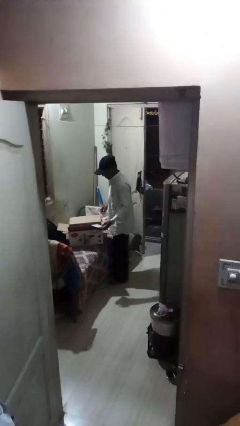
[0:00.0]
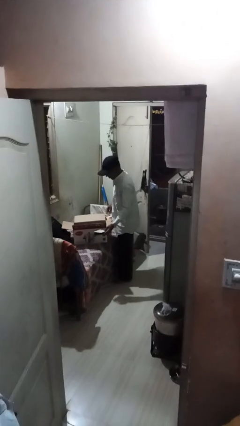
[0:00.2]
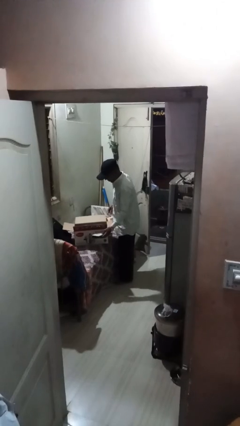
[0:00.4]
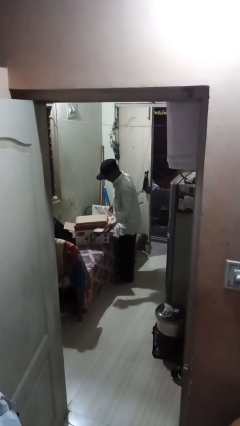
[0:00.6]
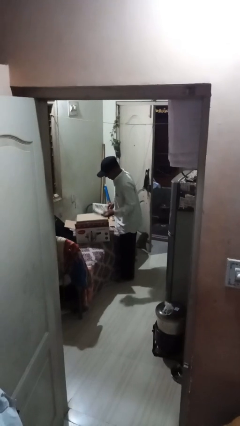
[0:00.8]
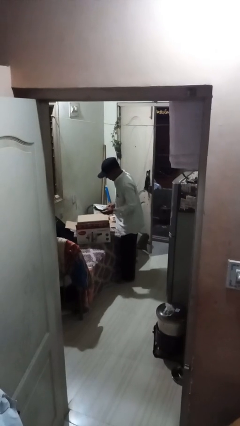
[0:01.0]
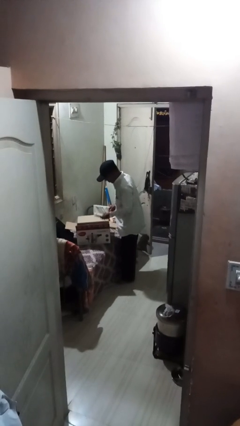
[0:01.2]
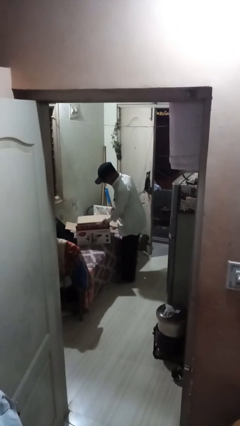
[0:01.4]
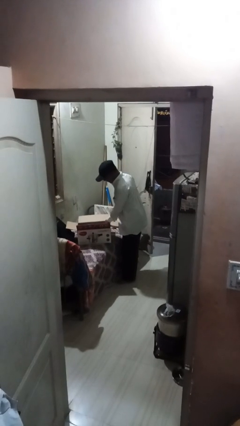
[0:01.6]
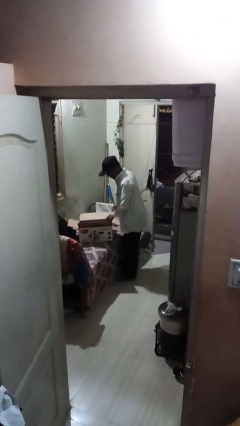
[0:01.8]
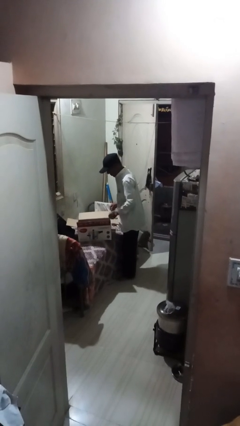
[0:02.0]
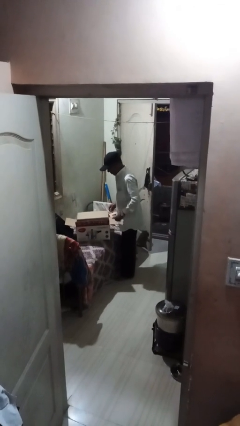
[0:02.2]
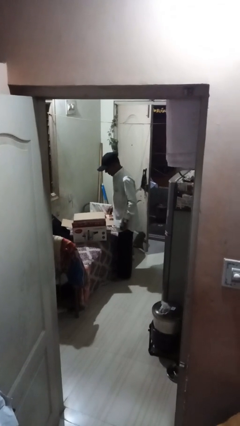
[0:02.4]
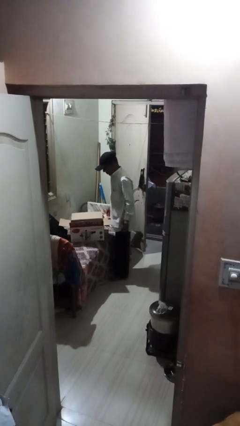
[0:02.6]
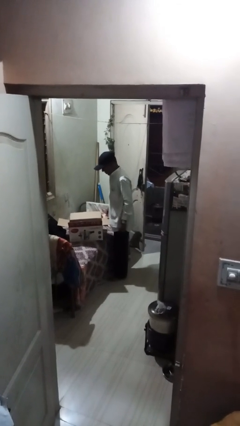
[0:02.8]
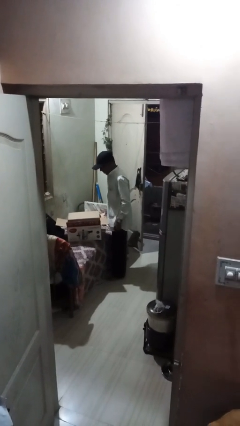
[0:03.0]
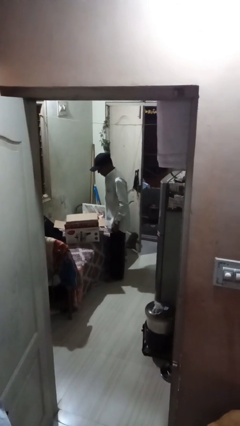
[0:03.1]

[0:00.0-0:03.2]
person puts object into box

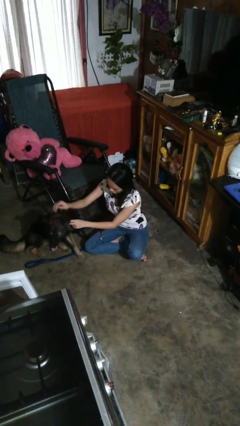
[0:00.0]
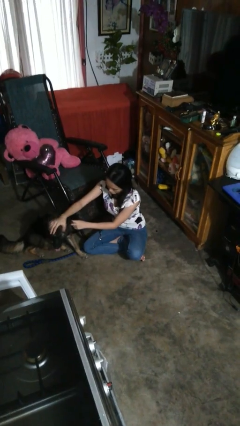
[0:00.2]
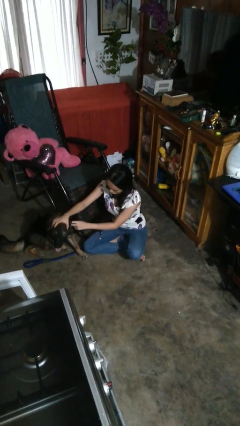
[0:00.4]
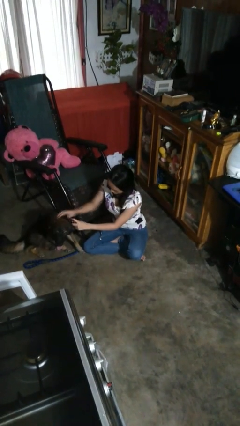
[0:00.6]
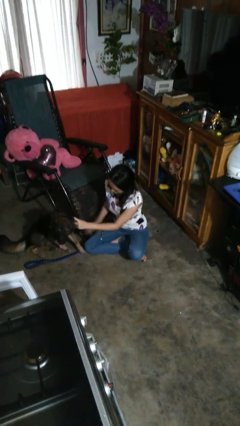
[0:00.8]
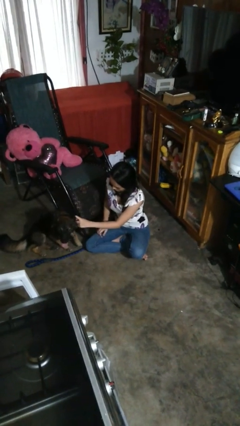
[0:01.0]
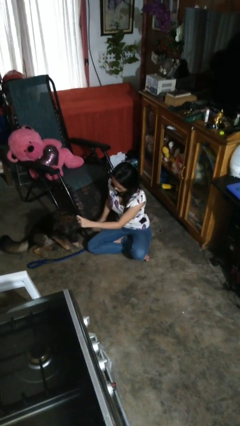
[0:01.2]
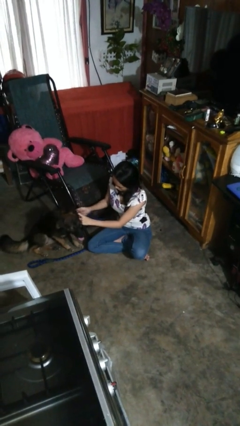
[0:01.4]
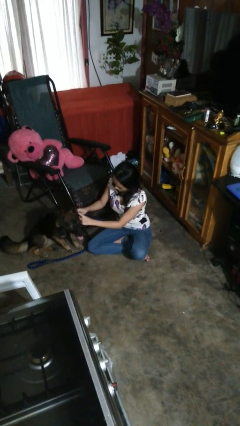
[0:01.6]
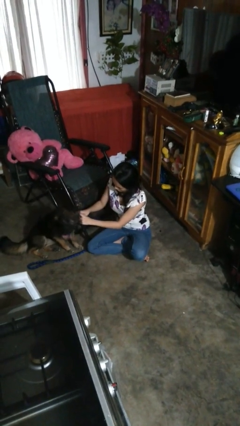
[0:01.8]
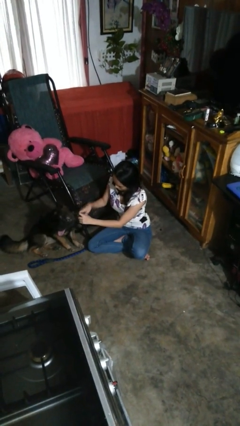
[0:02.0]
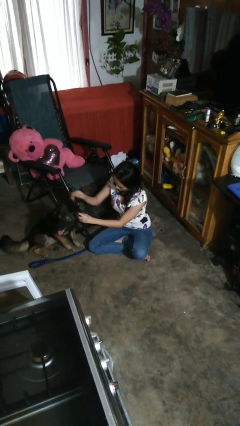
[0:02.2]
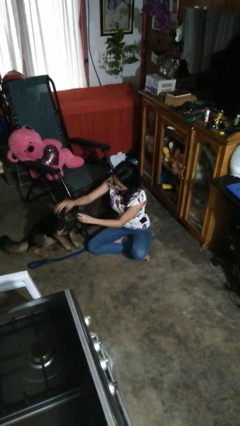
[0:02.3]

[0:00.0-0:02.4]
person attaches leash to dog

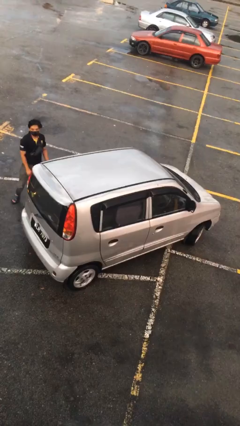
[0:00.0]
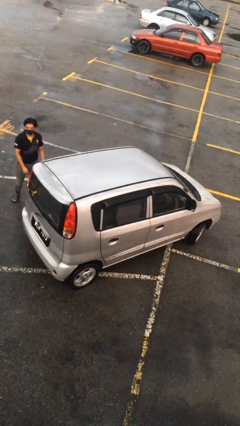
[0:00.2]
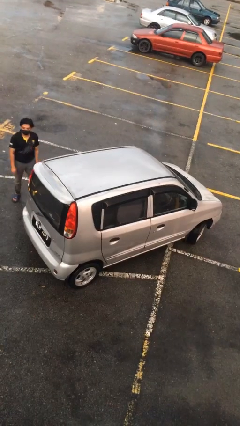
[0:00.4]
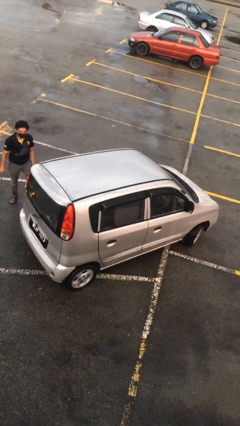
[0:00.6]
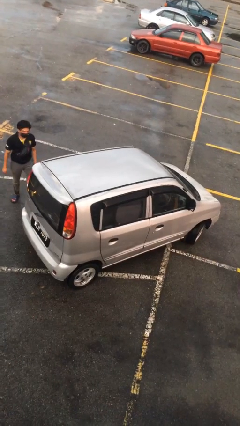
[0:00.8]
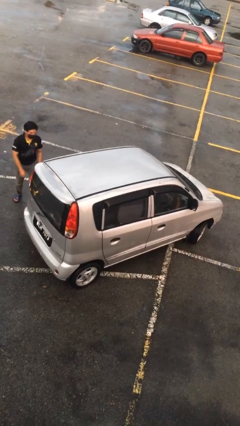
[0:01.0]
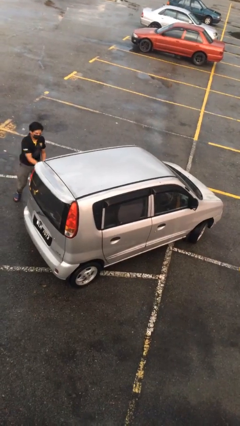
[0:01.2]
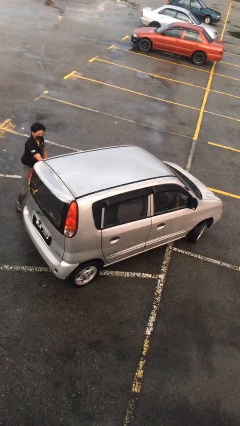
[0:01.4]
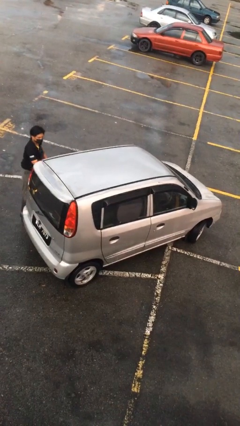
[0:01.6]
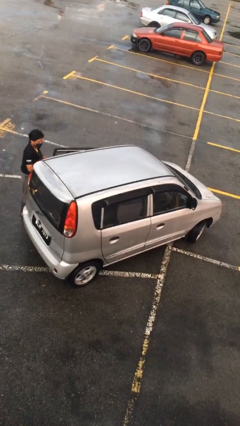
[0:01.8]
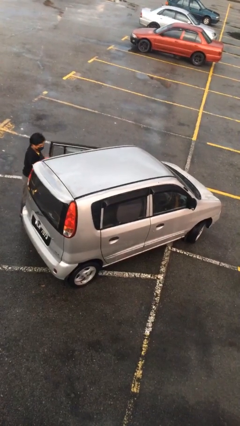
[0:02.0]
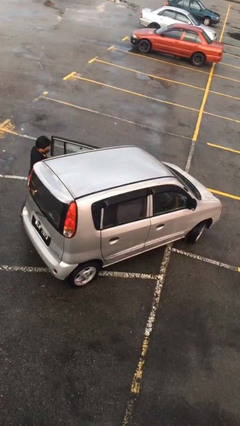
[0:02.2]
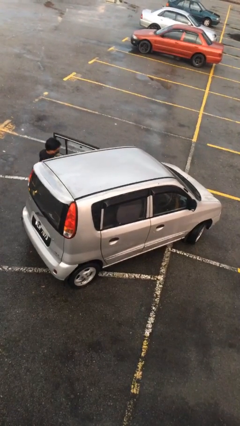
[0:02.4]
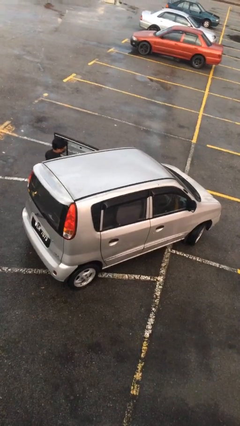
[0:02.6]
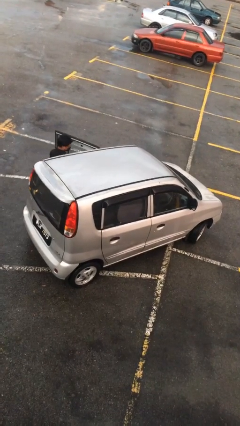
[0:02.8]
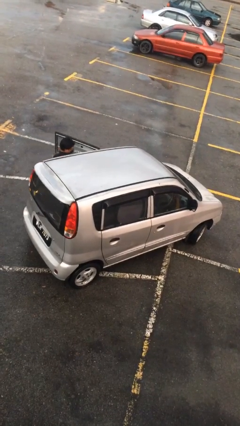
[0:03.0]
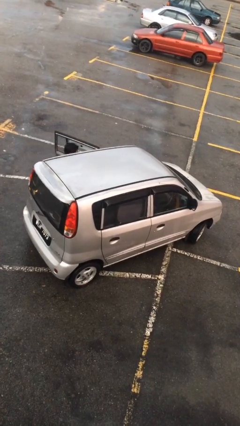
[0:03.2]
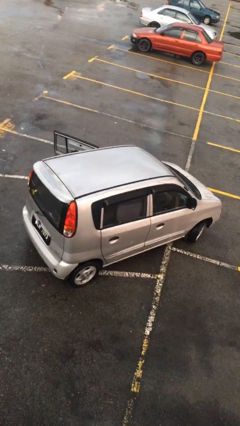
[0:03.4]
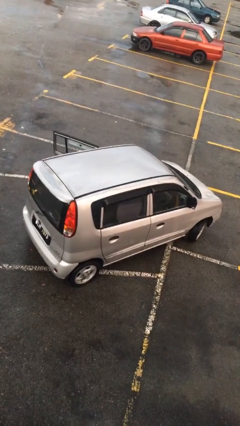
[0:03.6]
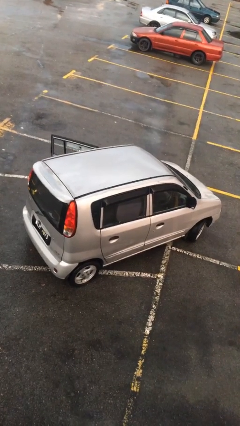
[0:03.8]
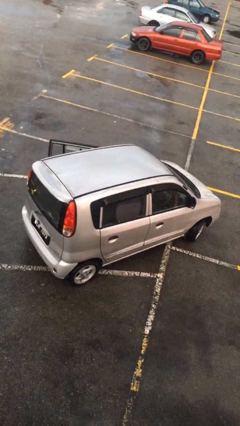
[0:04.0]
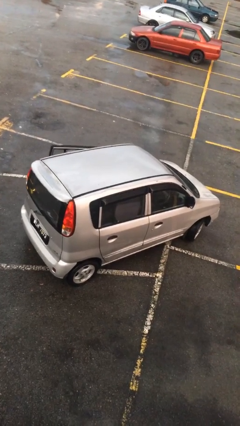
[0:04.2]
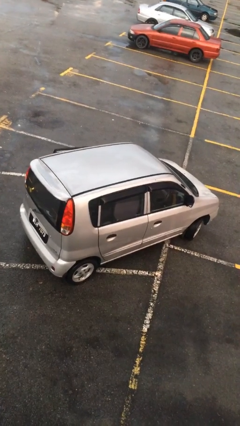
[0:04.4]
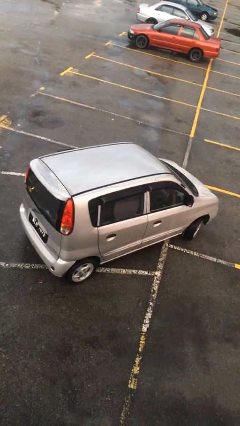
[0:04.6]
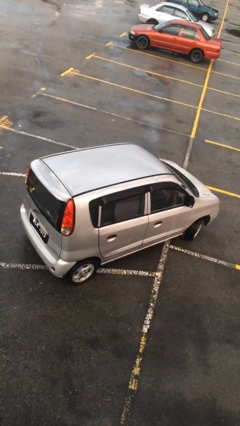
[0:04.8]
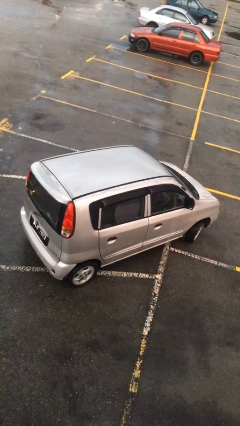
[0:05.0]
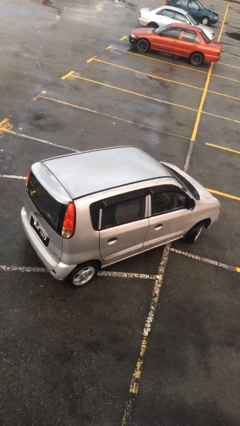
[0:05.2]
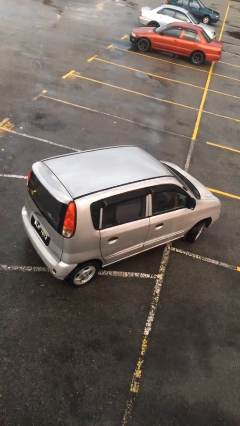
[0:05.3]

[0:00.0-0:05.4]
car picks up person

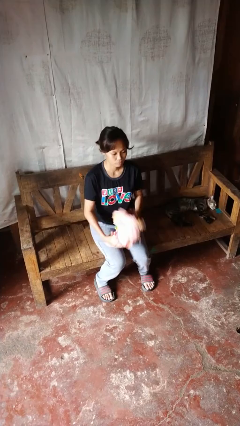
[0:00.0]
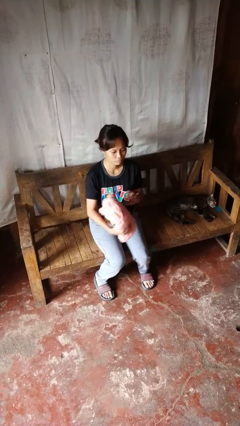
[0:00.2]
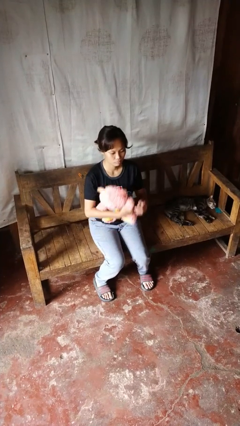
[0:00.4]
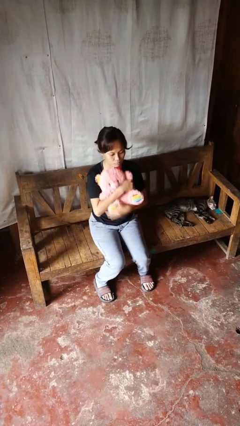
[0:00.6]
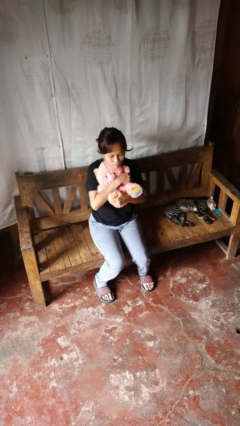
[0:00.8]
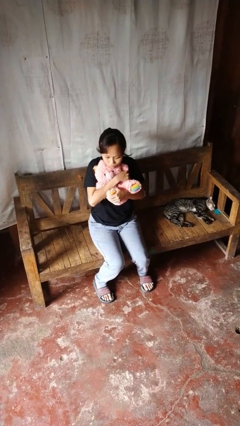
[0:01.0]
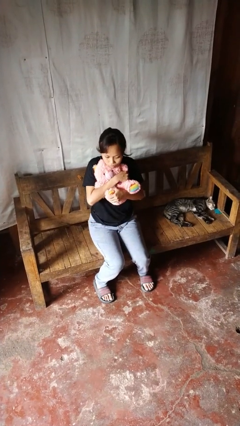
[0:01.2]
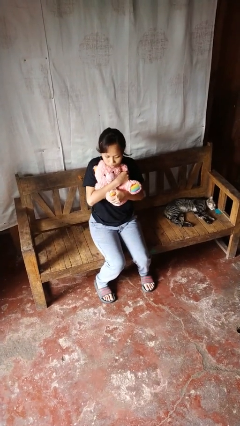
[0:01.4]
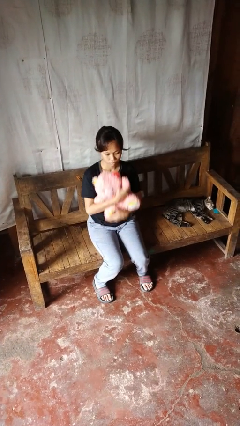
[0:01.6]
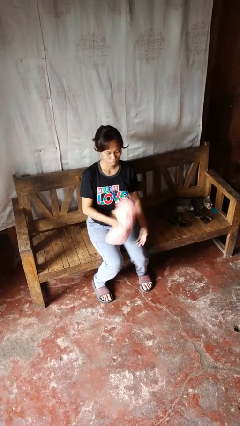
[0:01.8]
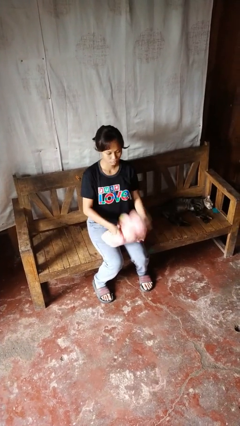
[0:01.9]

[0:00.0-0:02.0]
person hugs stuffed animal

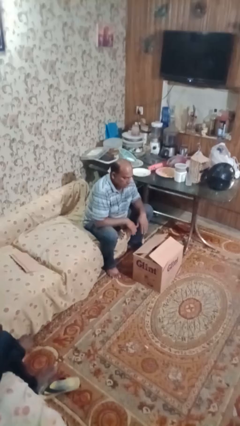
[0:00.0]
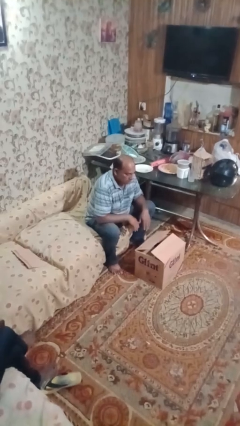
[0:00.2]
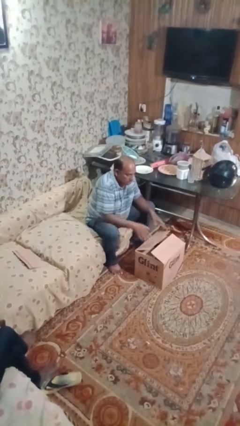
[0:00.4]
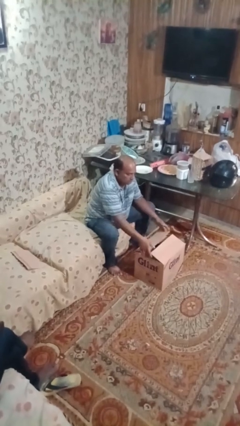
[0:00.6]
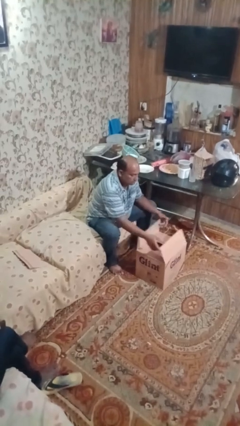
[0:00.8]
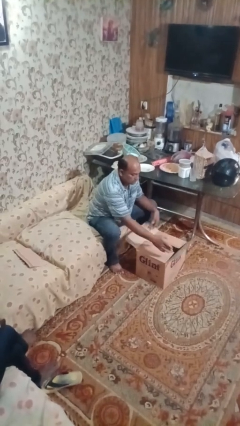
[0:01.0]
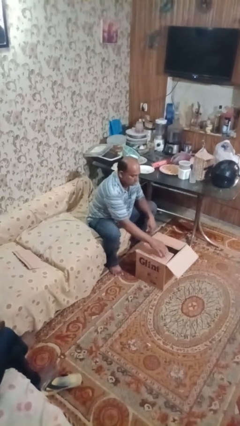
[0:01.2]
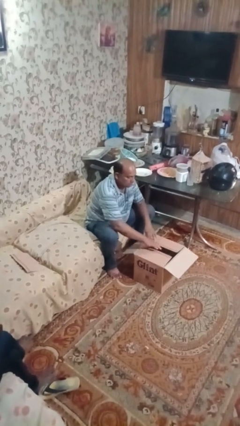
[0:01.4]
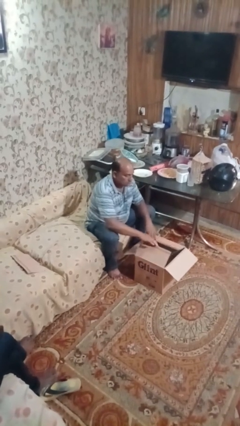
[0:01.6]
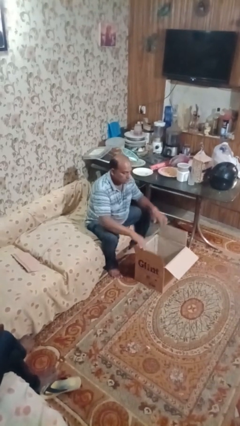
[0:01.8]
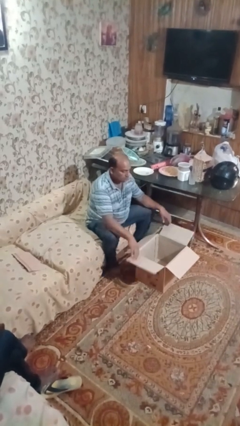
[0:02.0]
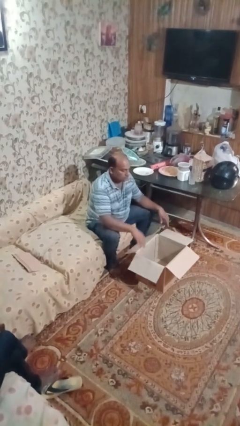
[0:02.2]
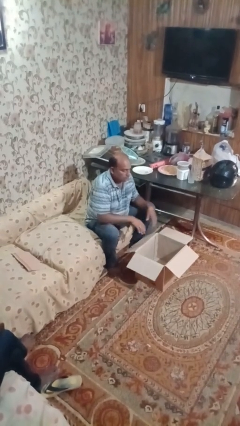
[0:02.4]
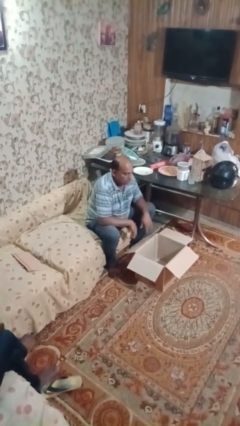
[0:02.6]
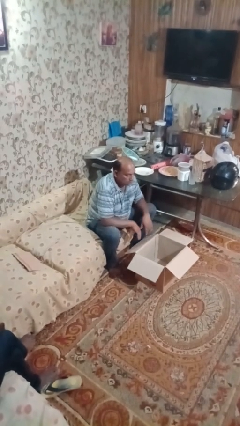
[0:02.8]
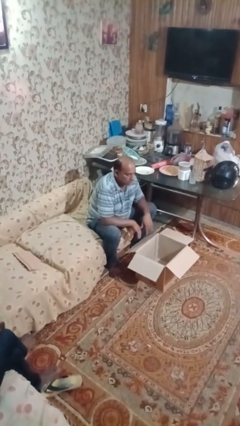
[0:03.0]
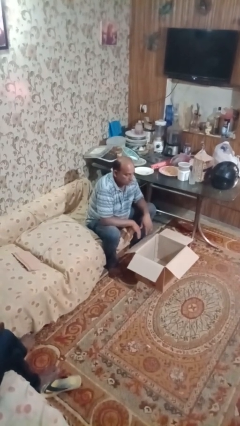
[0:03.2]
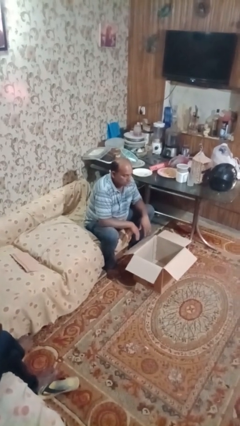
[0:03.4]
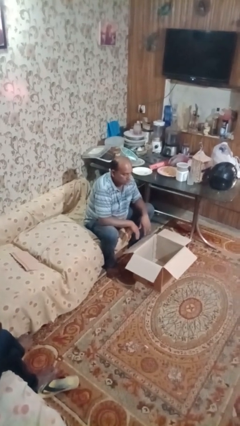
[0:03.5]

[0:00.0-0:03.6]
person opens box

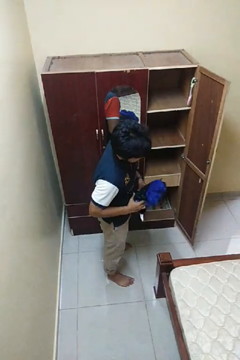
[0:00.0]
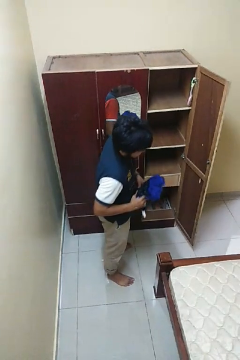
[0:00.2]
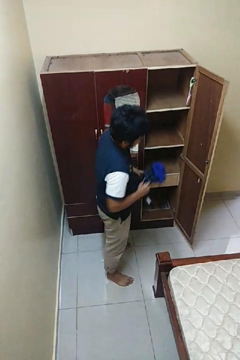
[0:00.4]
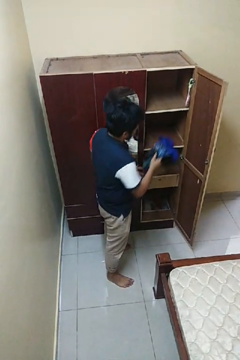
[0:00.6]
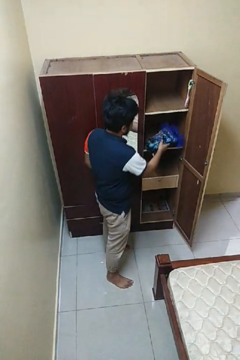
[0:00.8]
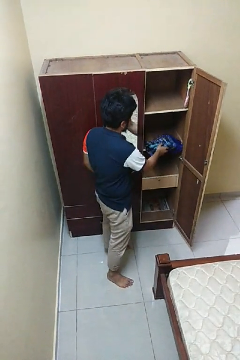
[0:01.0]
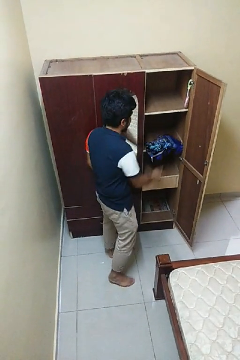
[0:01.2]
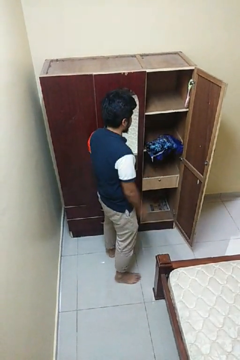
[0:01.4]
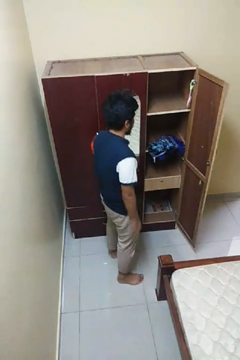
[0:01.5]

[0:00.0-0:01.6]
person puts down object into cabinet
